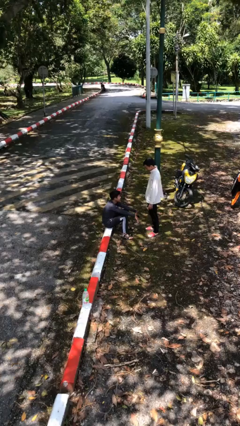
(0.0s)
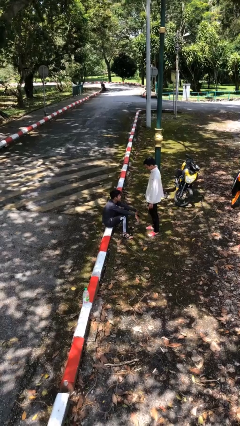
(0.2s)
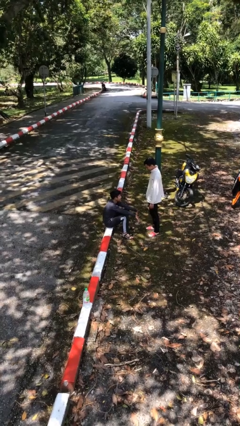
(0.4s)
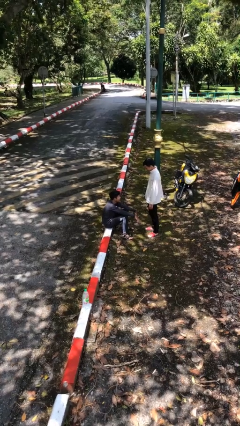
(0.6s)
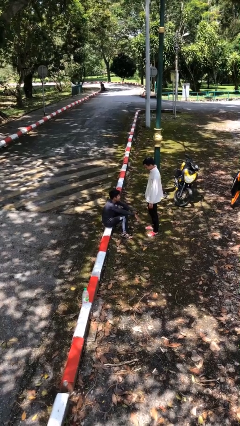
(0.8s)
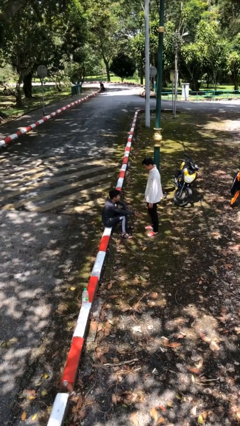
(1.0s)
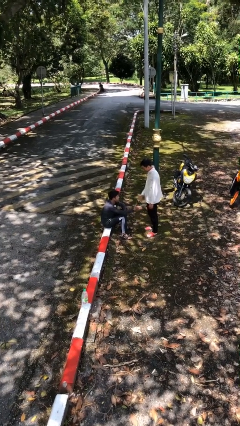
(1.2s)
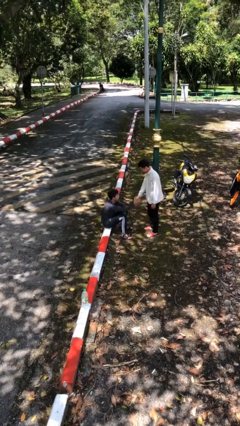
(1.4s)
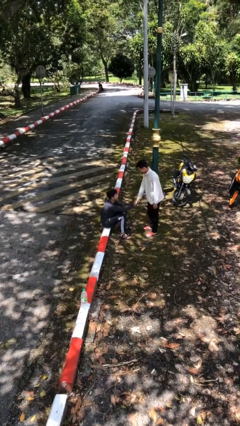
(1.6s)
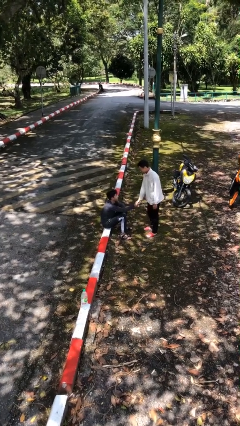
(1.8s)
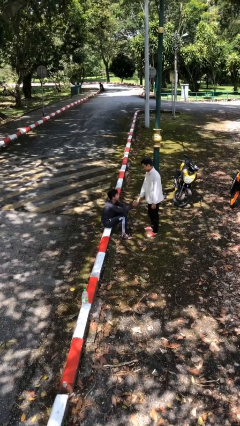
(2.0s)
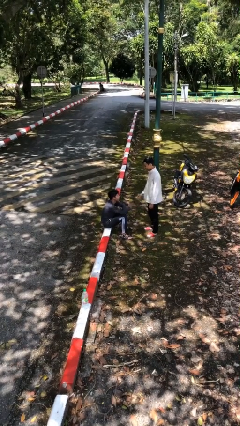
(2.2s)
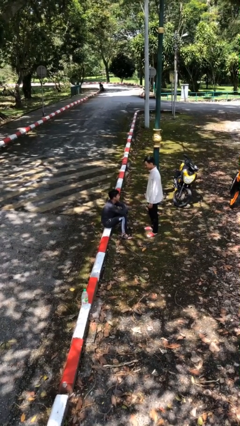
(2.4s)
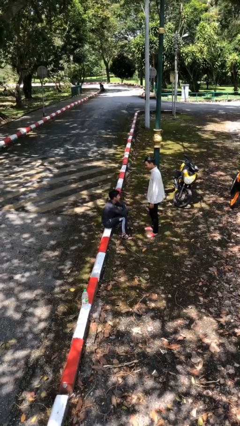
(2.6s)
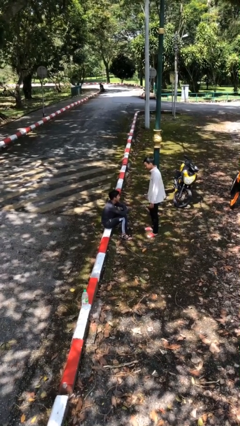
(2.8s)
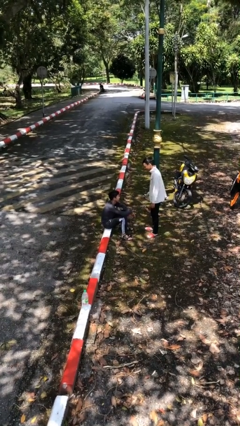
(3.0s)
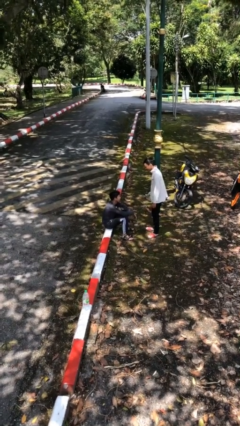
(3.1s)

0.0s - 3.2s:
person shakes hand

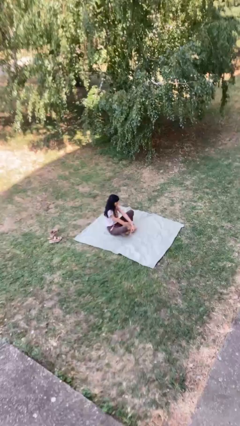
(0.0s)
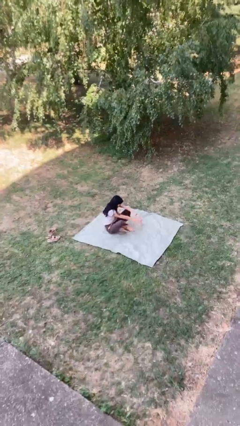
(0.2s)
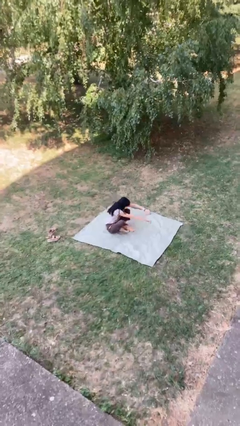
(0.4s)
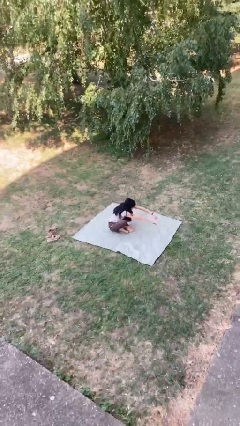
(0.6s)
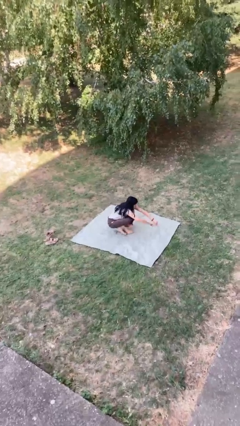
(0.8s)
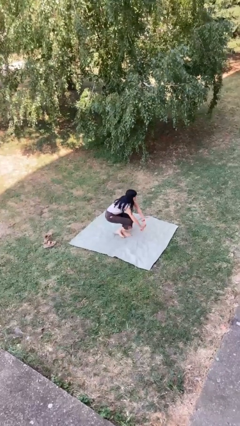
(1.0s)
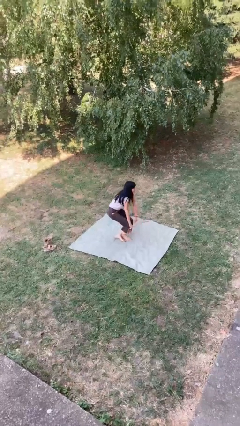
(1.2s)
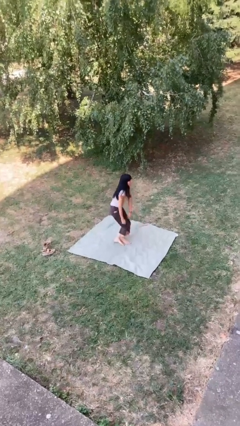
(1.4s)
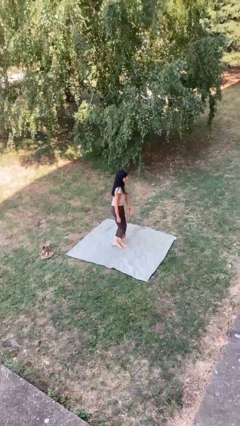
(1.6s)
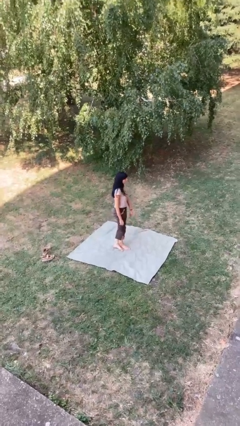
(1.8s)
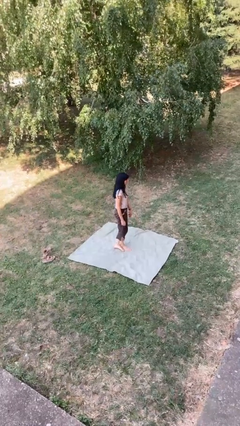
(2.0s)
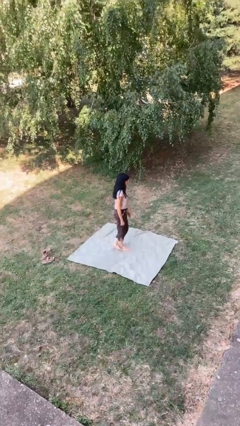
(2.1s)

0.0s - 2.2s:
person stands up from floor

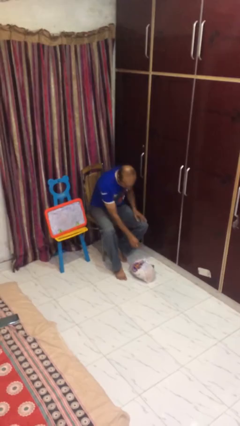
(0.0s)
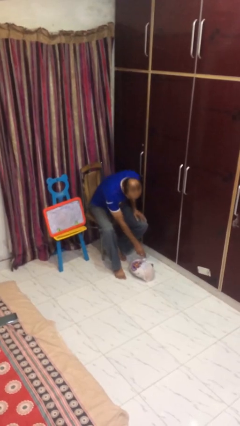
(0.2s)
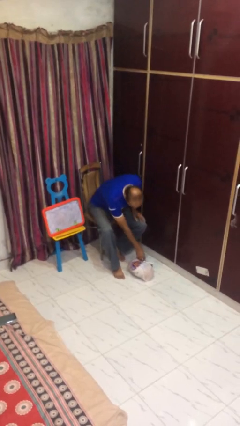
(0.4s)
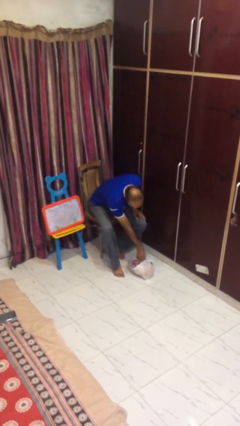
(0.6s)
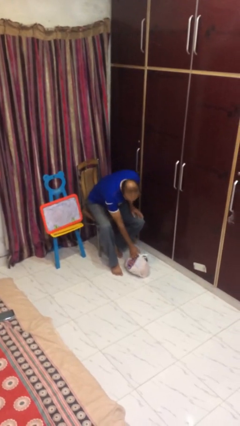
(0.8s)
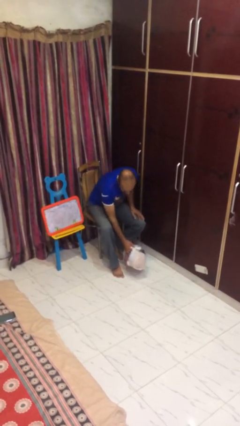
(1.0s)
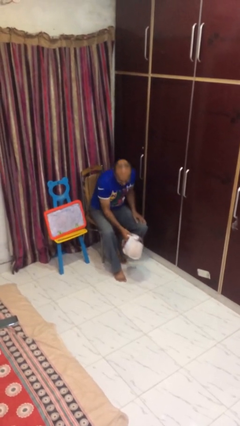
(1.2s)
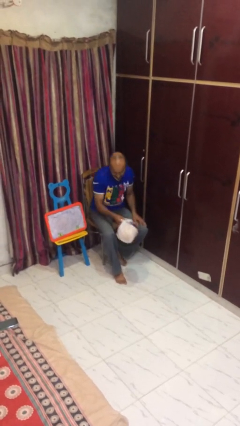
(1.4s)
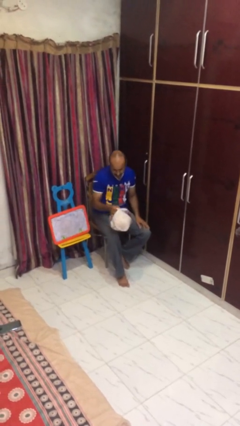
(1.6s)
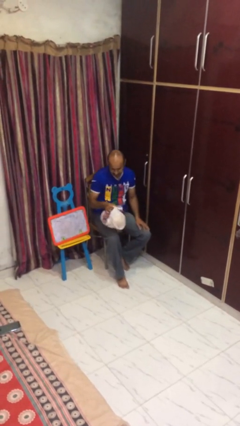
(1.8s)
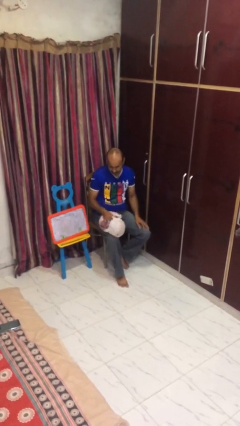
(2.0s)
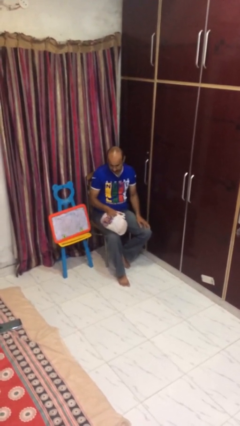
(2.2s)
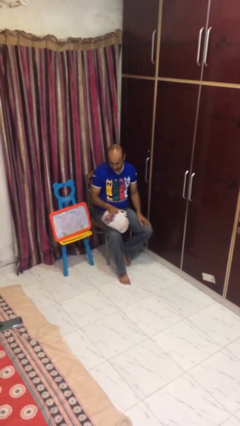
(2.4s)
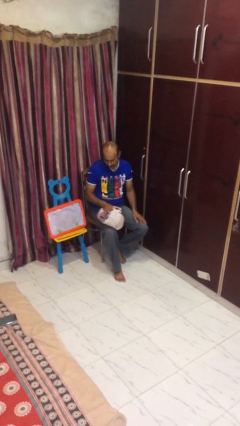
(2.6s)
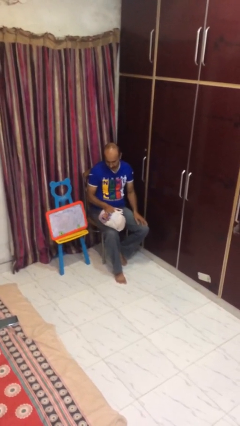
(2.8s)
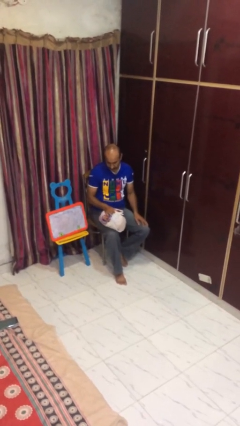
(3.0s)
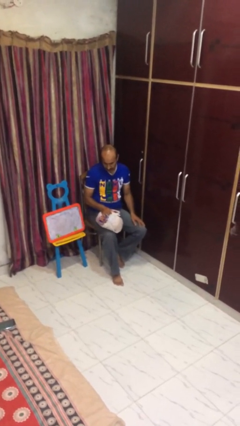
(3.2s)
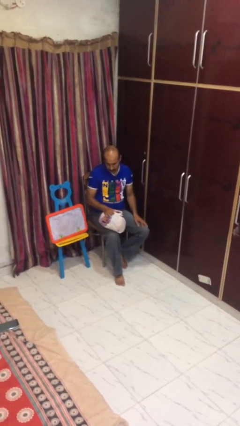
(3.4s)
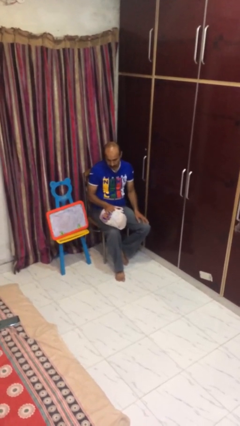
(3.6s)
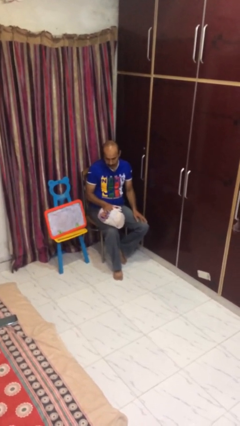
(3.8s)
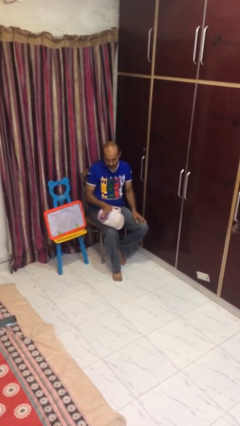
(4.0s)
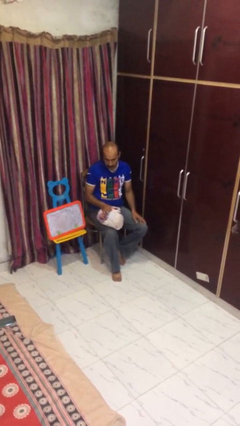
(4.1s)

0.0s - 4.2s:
person picks up object from floor

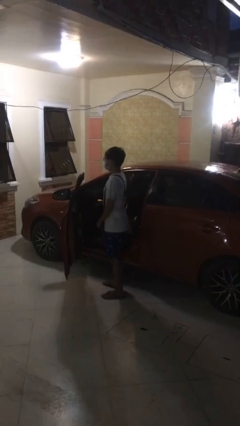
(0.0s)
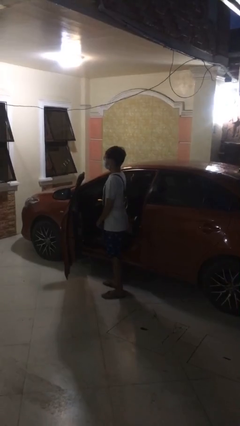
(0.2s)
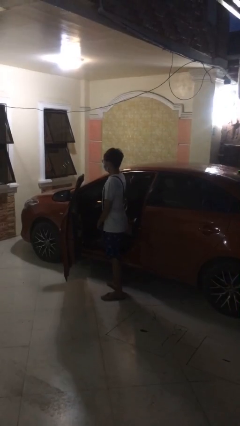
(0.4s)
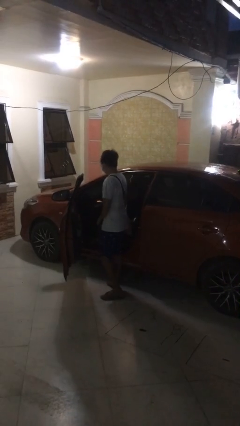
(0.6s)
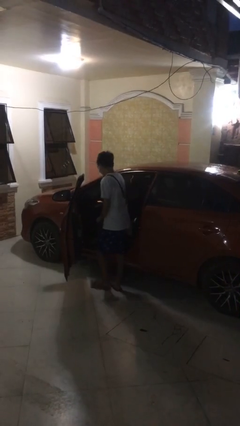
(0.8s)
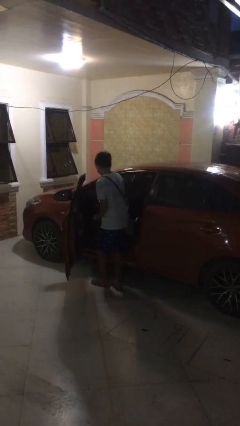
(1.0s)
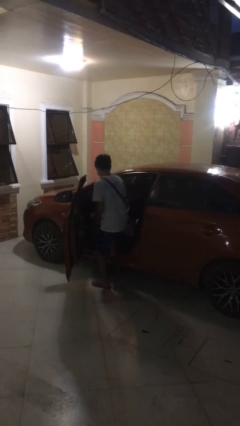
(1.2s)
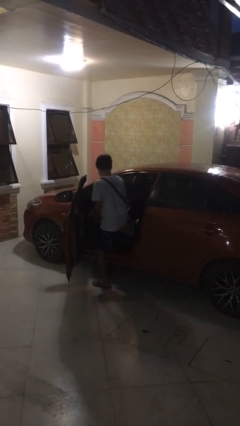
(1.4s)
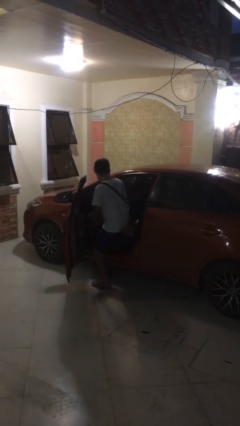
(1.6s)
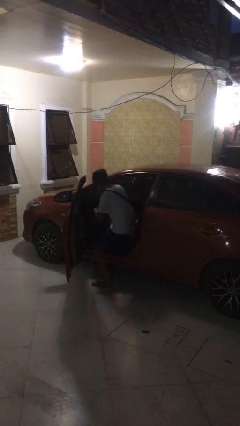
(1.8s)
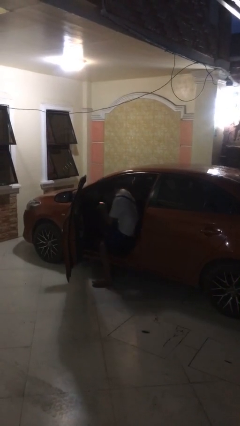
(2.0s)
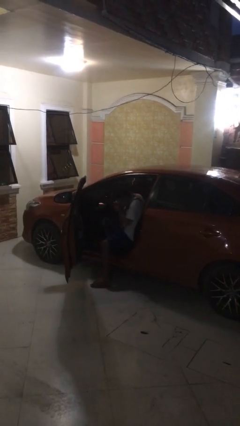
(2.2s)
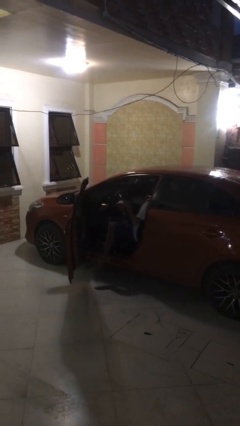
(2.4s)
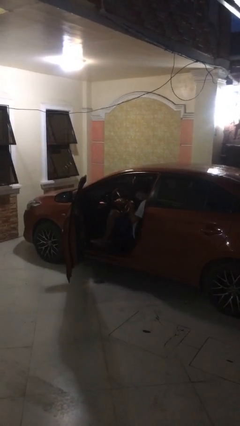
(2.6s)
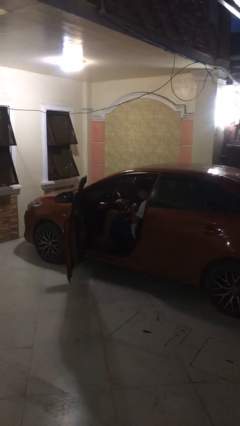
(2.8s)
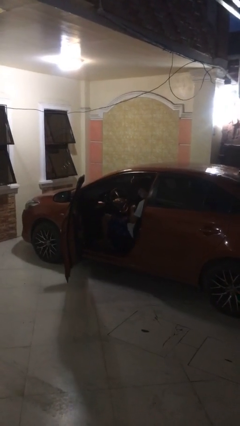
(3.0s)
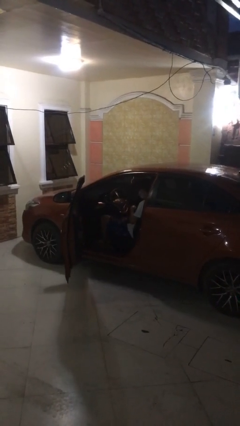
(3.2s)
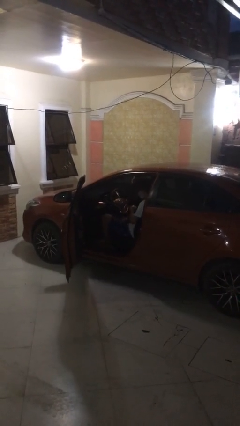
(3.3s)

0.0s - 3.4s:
person enters car

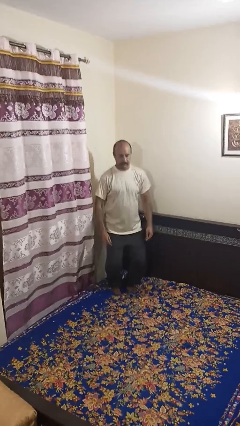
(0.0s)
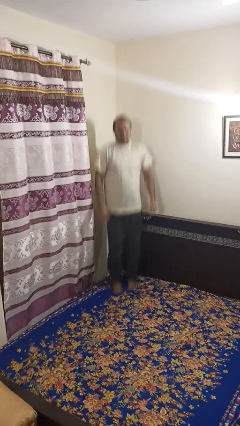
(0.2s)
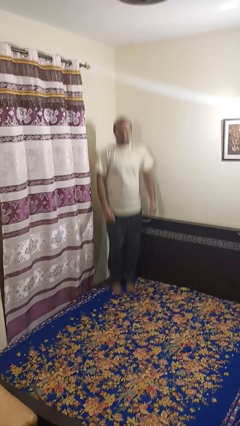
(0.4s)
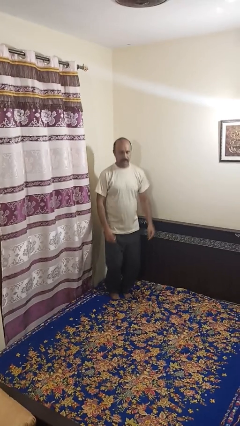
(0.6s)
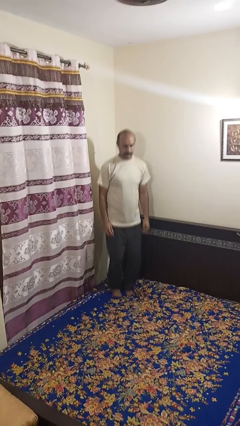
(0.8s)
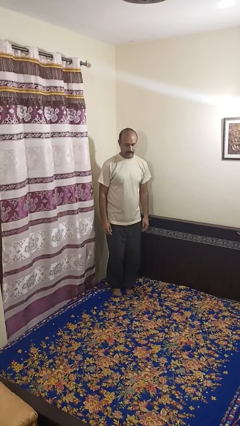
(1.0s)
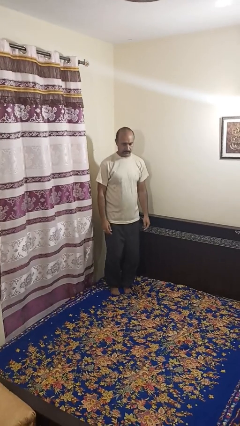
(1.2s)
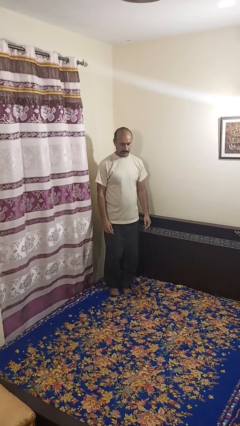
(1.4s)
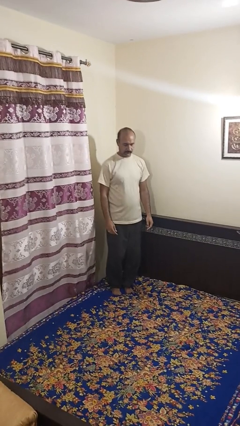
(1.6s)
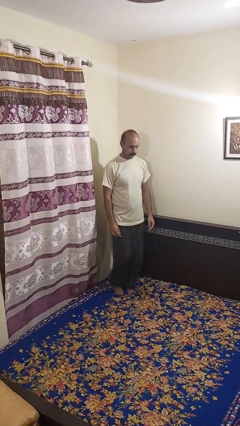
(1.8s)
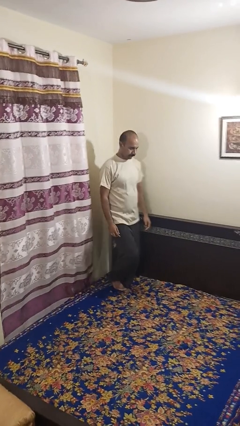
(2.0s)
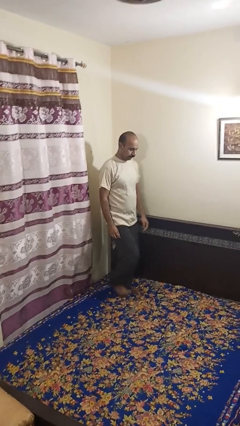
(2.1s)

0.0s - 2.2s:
person jumps on bed

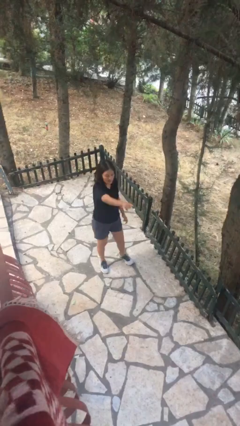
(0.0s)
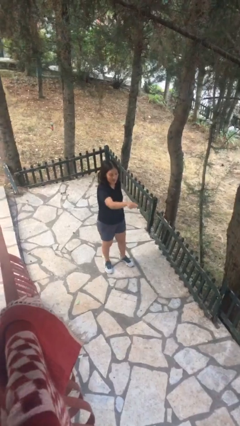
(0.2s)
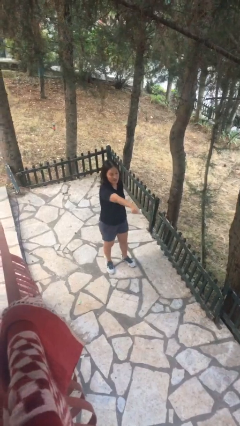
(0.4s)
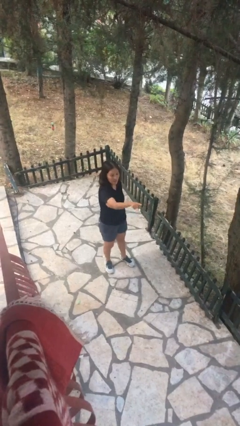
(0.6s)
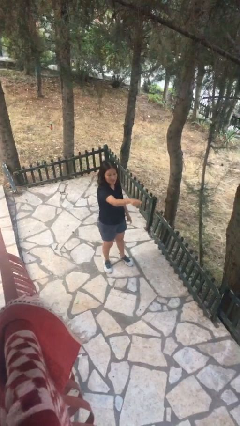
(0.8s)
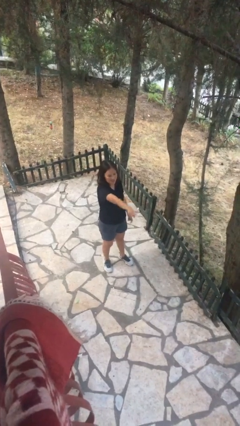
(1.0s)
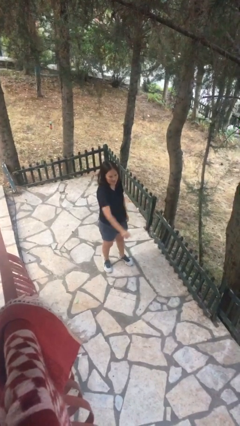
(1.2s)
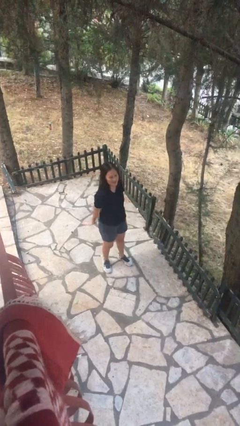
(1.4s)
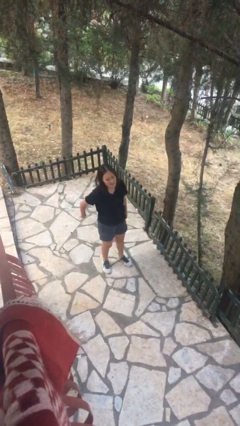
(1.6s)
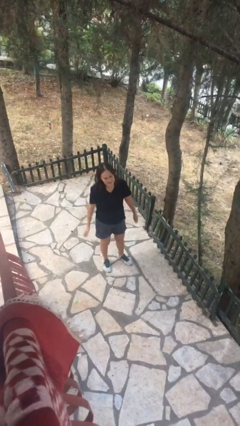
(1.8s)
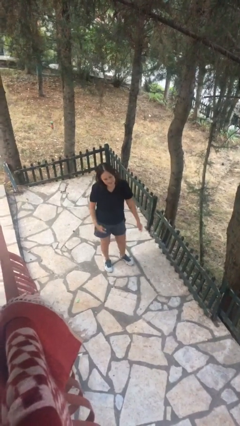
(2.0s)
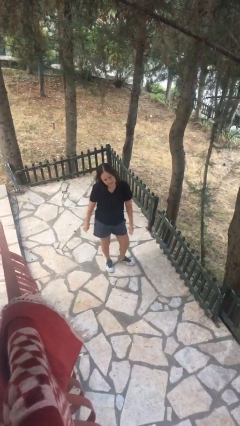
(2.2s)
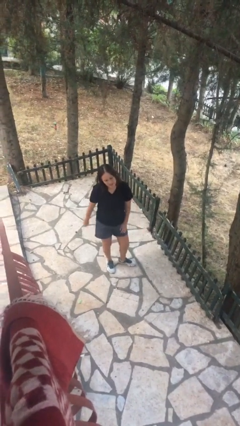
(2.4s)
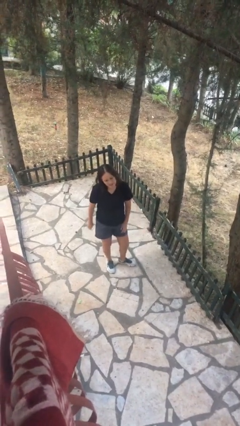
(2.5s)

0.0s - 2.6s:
person points at person
